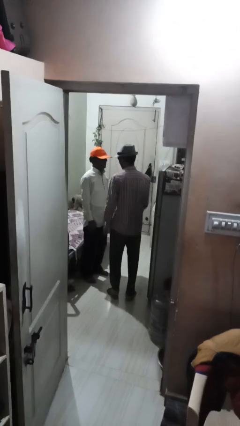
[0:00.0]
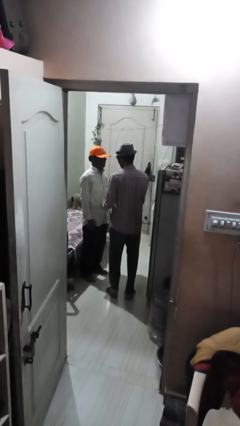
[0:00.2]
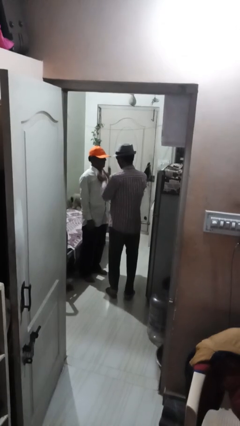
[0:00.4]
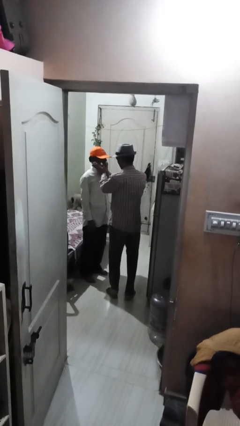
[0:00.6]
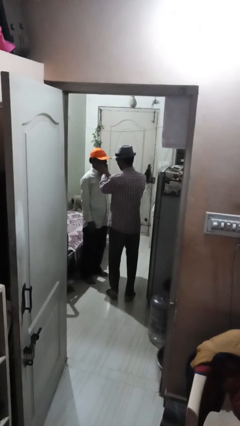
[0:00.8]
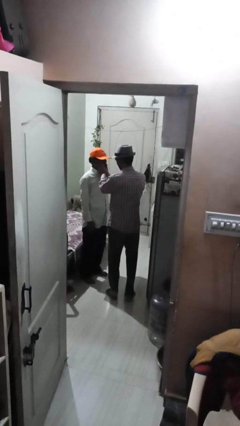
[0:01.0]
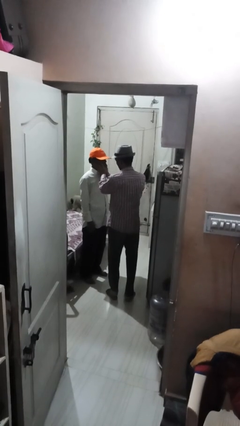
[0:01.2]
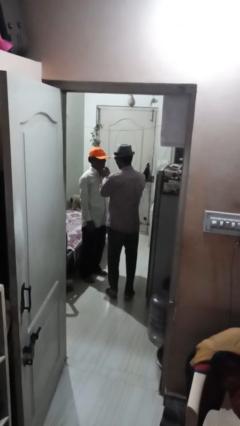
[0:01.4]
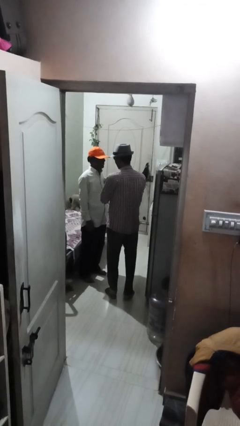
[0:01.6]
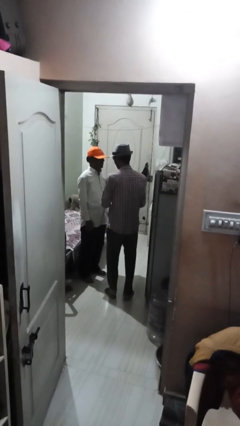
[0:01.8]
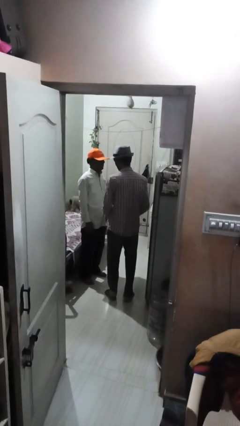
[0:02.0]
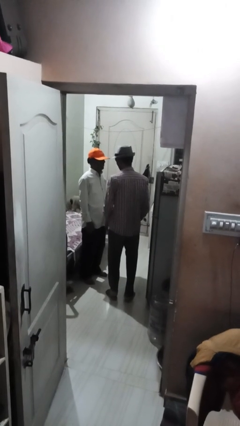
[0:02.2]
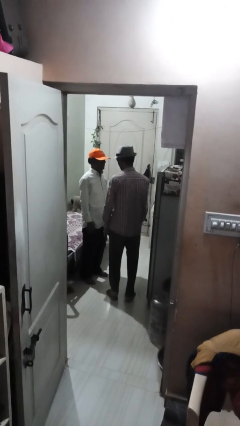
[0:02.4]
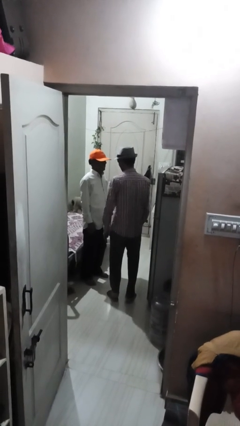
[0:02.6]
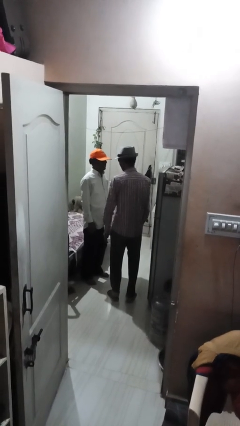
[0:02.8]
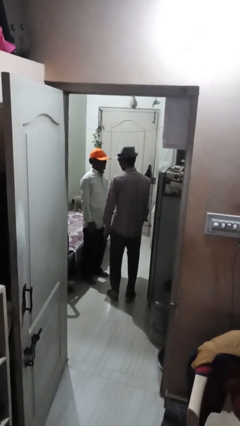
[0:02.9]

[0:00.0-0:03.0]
person touches face of person

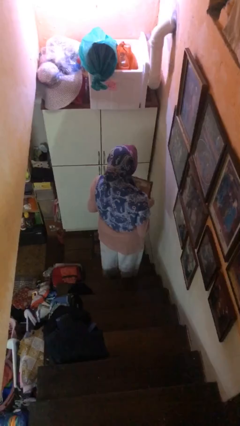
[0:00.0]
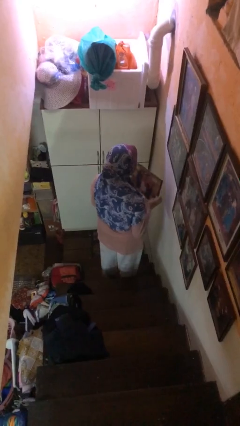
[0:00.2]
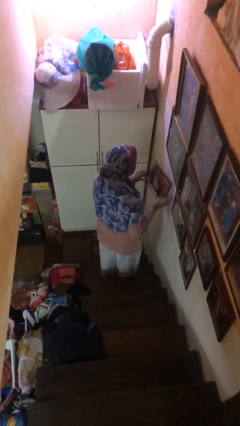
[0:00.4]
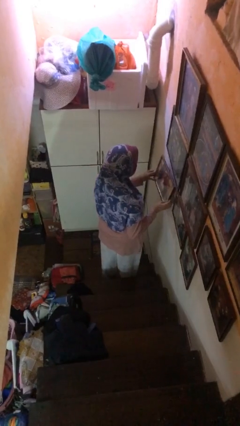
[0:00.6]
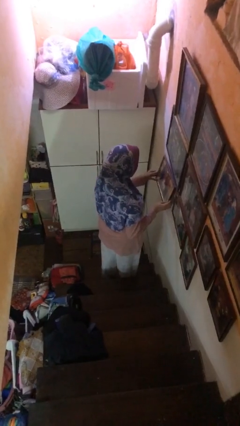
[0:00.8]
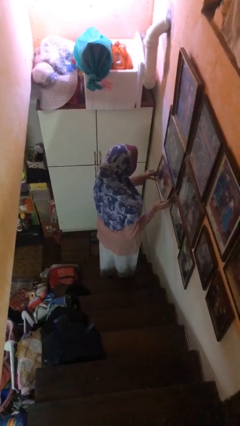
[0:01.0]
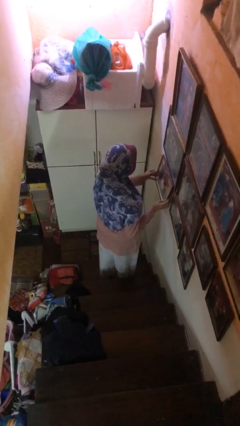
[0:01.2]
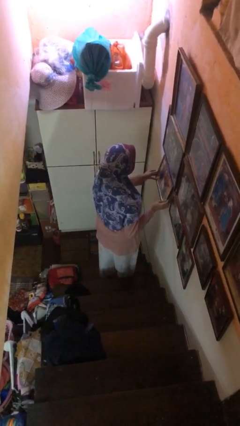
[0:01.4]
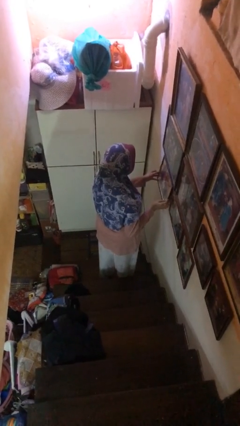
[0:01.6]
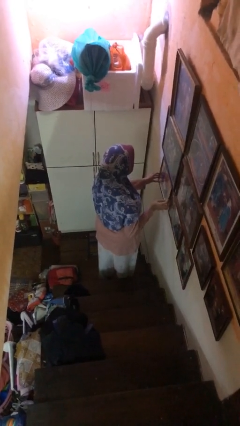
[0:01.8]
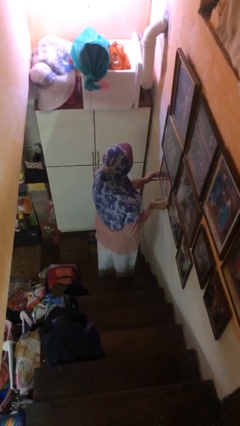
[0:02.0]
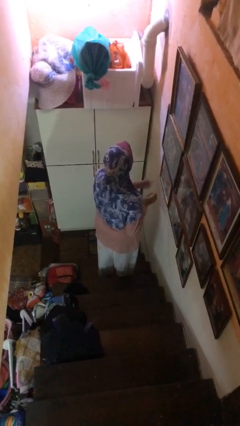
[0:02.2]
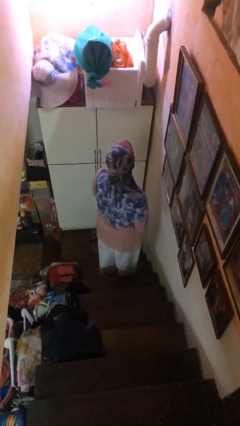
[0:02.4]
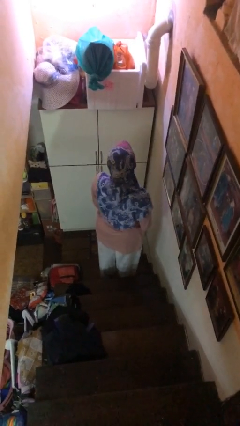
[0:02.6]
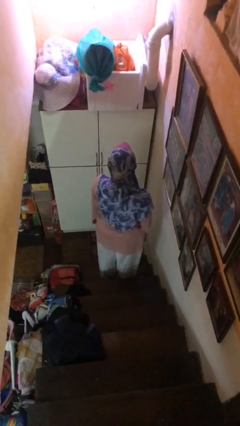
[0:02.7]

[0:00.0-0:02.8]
person takes down picture frame

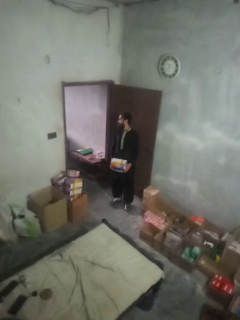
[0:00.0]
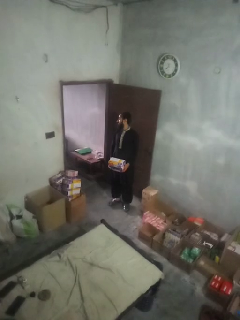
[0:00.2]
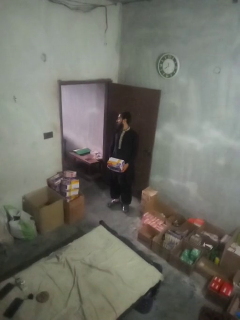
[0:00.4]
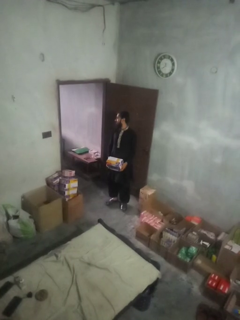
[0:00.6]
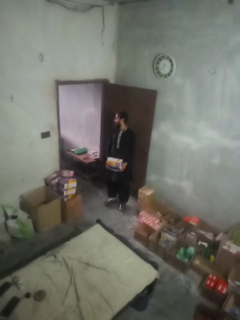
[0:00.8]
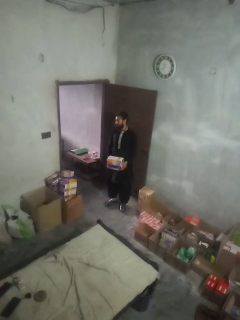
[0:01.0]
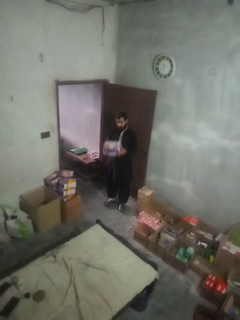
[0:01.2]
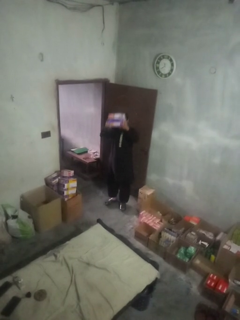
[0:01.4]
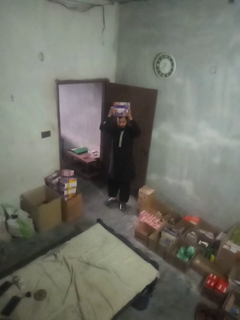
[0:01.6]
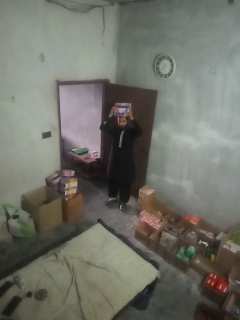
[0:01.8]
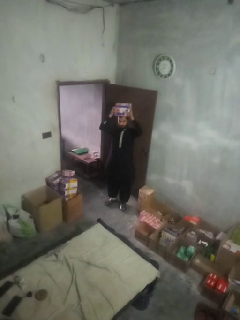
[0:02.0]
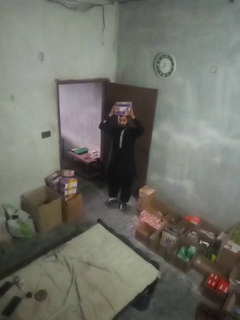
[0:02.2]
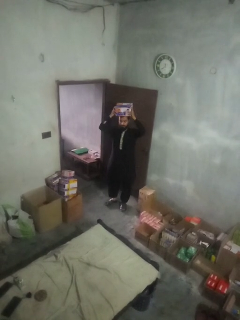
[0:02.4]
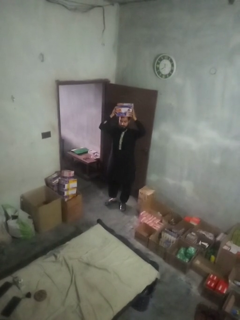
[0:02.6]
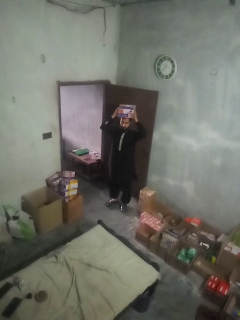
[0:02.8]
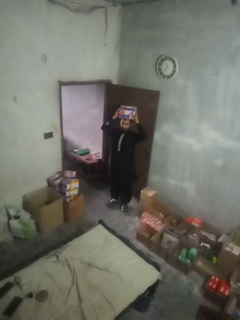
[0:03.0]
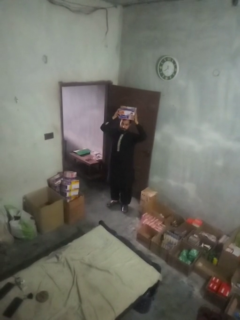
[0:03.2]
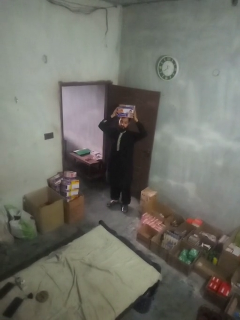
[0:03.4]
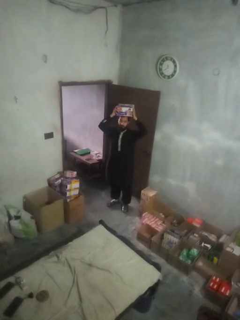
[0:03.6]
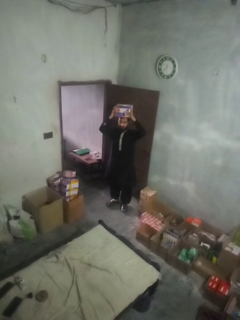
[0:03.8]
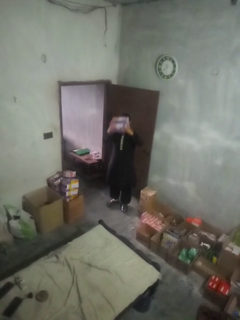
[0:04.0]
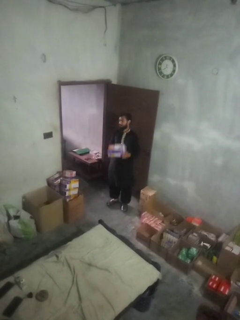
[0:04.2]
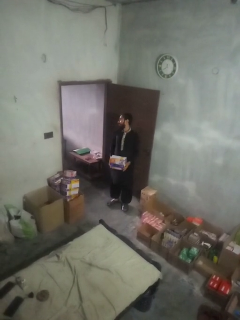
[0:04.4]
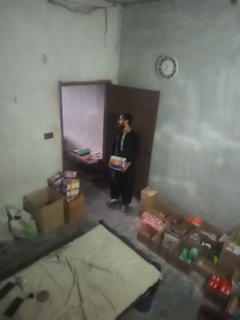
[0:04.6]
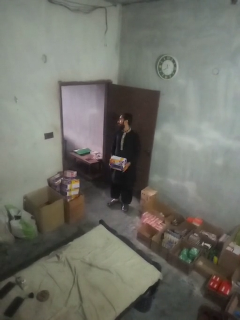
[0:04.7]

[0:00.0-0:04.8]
person holds object above head

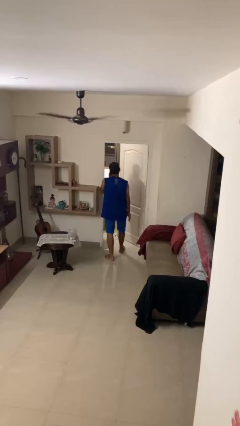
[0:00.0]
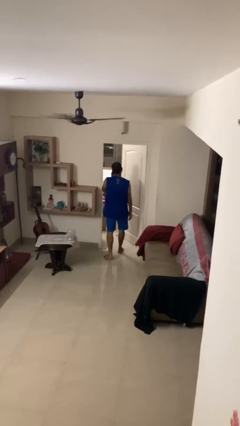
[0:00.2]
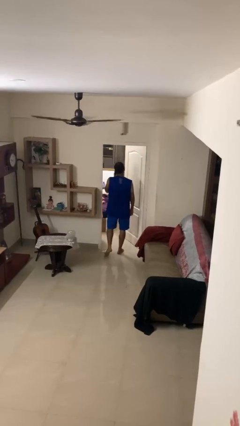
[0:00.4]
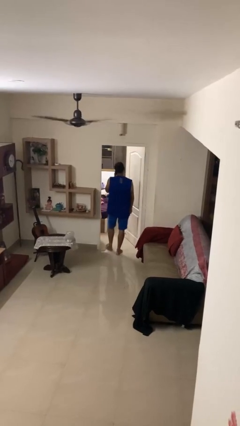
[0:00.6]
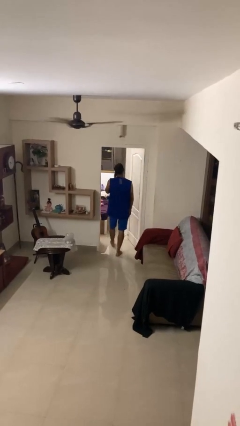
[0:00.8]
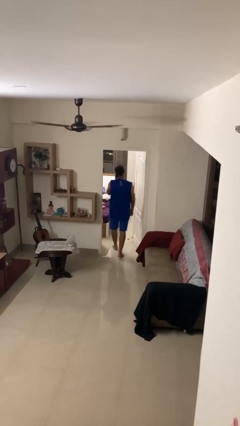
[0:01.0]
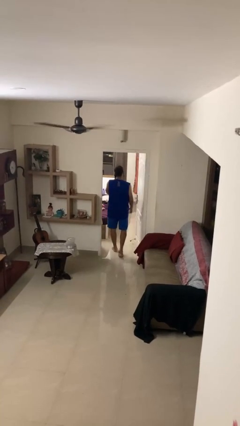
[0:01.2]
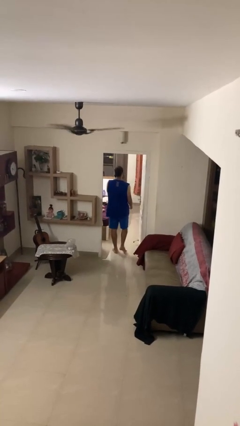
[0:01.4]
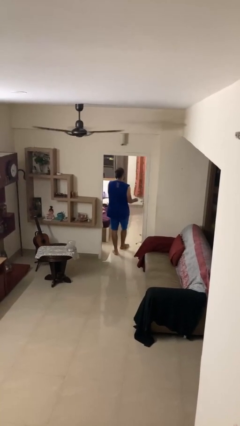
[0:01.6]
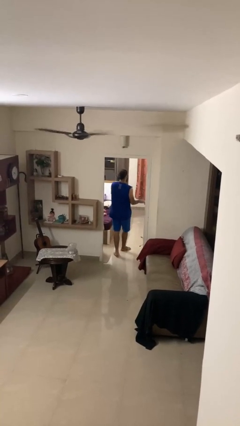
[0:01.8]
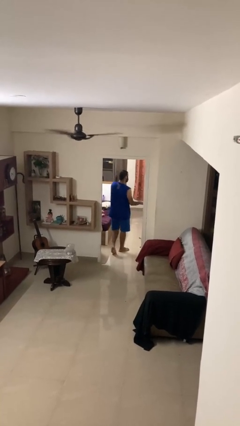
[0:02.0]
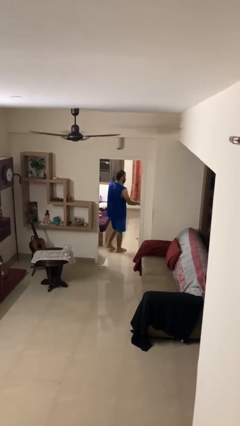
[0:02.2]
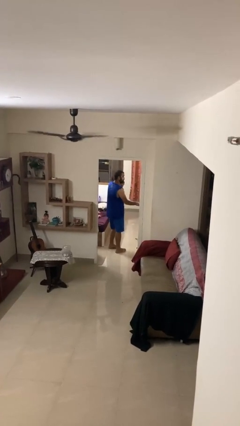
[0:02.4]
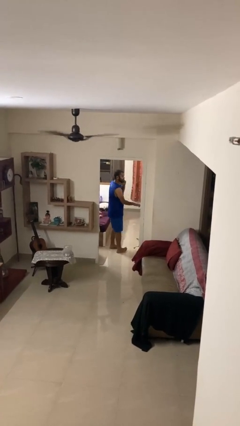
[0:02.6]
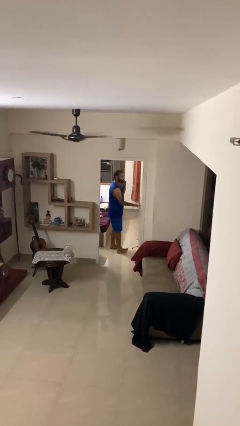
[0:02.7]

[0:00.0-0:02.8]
person exits scene through structure

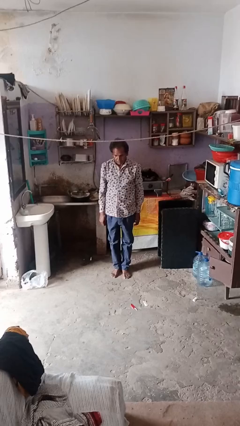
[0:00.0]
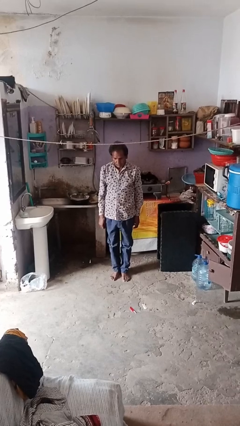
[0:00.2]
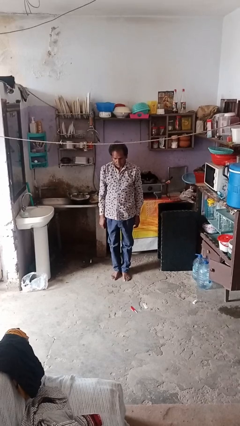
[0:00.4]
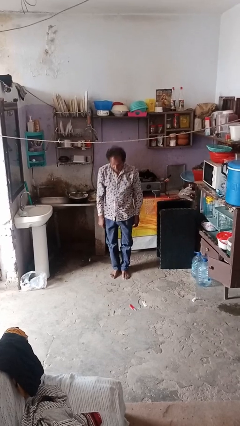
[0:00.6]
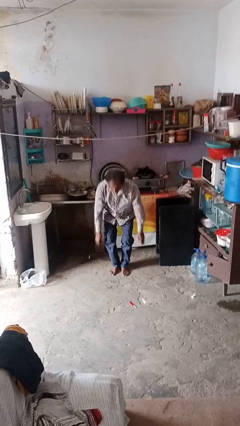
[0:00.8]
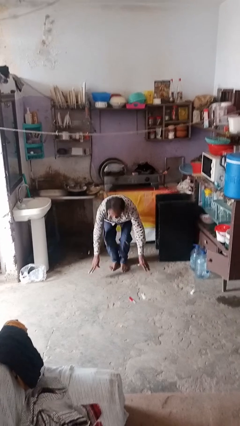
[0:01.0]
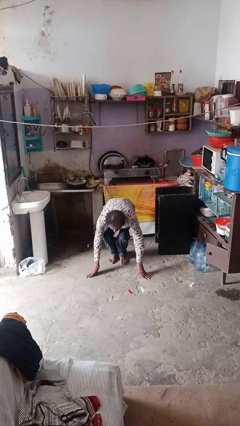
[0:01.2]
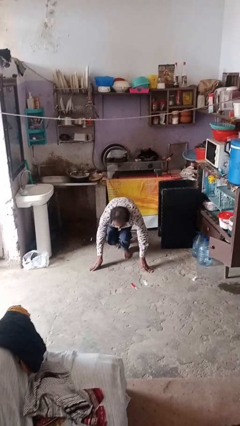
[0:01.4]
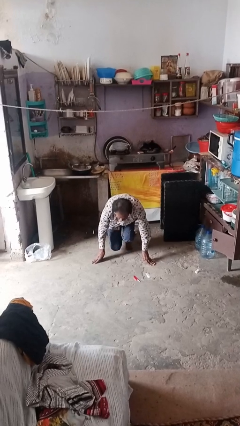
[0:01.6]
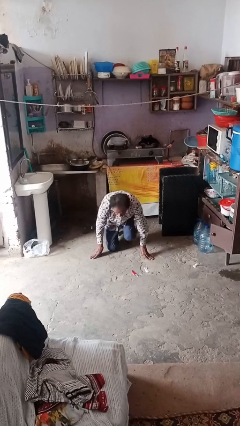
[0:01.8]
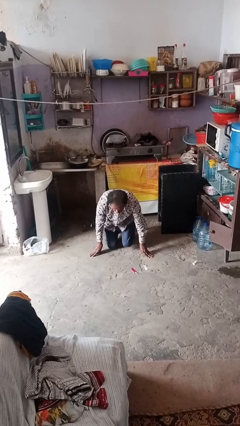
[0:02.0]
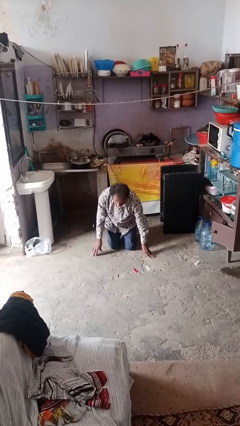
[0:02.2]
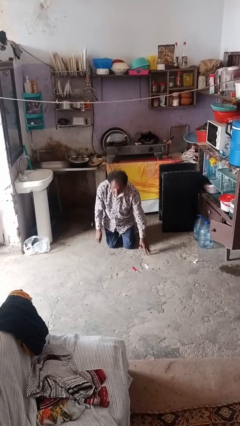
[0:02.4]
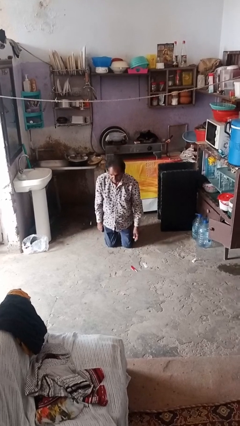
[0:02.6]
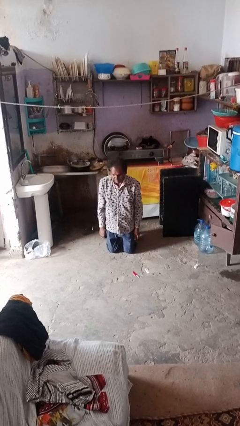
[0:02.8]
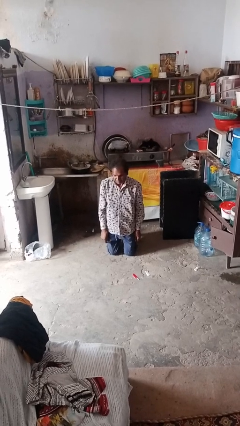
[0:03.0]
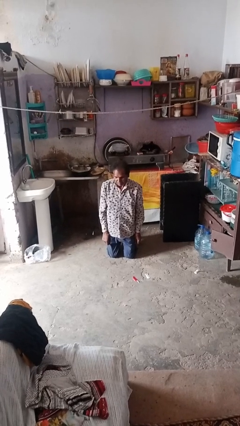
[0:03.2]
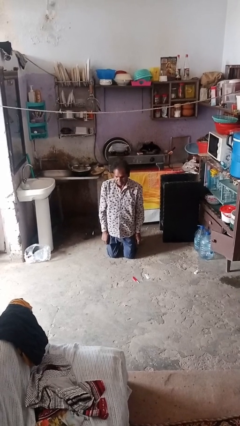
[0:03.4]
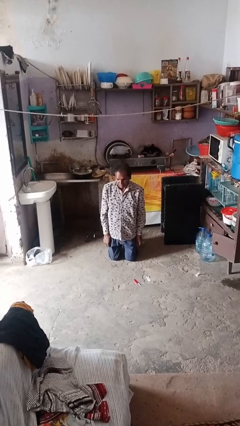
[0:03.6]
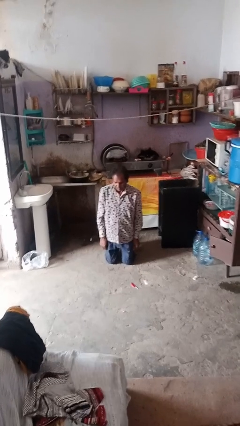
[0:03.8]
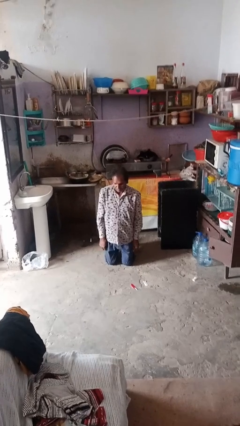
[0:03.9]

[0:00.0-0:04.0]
person kneels

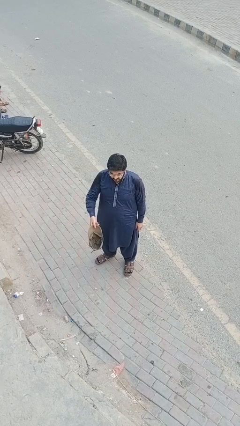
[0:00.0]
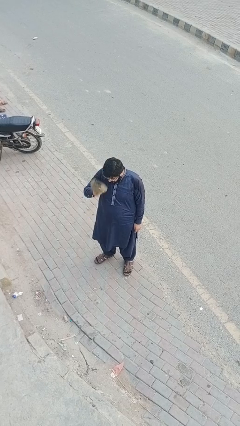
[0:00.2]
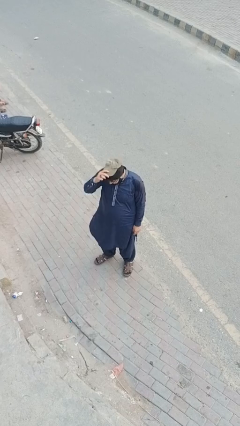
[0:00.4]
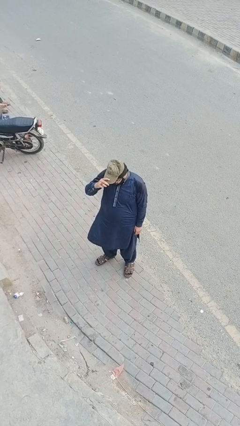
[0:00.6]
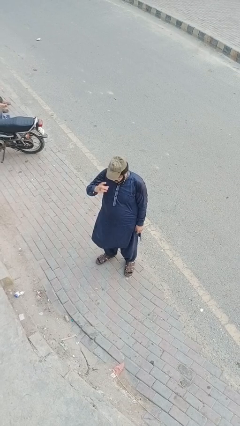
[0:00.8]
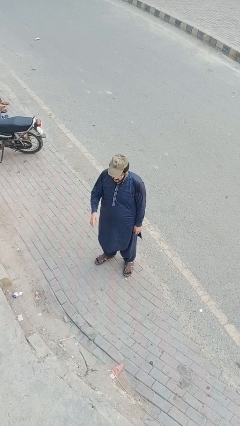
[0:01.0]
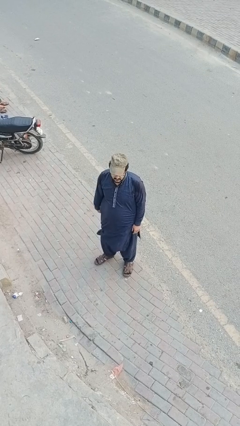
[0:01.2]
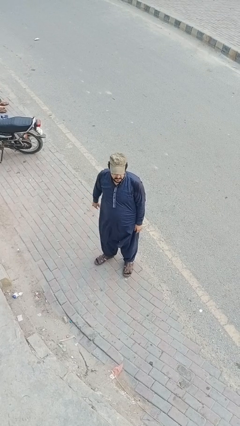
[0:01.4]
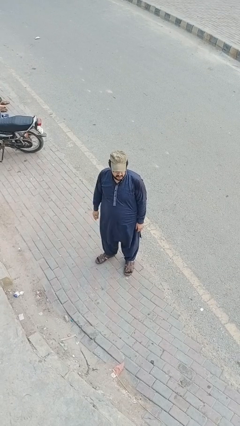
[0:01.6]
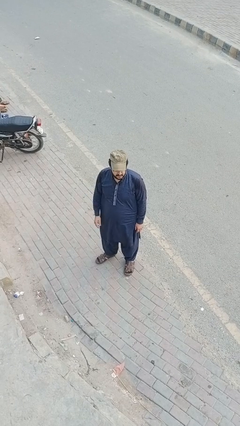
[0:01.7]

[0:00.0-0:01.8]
person puts on hat
